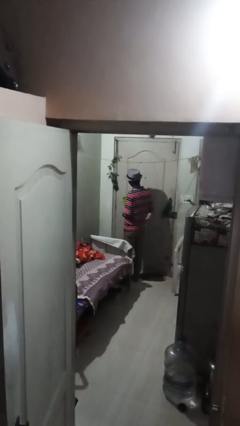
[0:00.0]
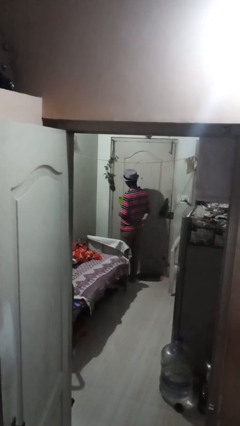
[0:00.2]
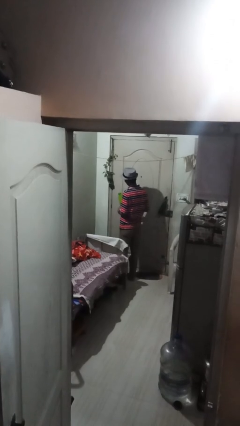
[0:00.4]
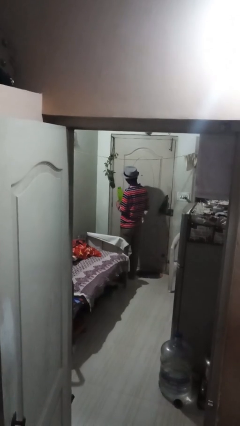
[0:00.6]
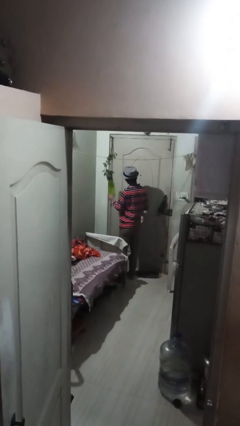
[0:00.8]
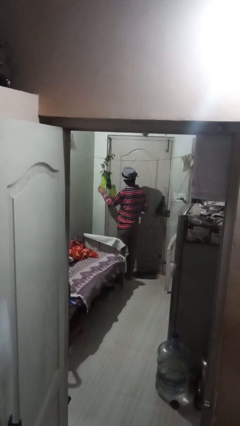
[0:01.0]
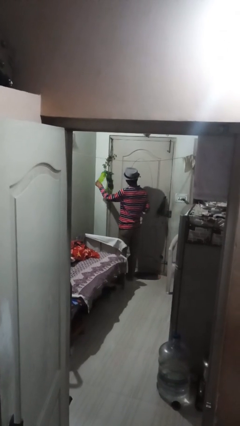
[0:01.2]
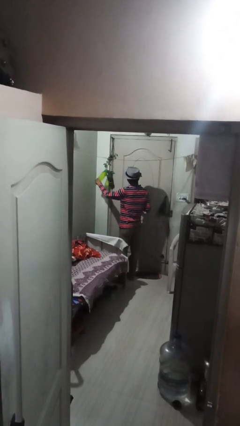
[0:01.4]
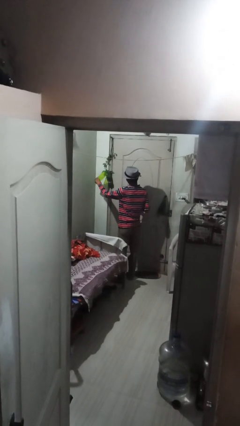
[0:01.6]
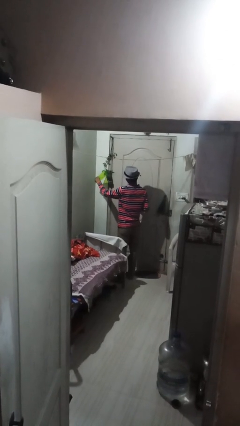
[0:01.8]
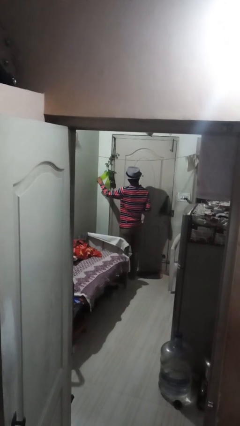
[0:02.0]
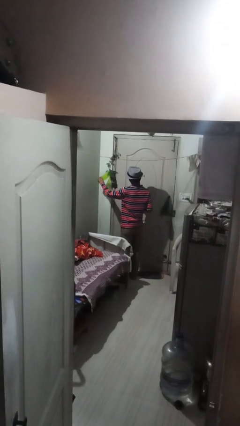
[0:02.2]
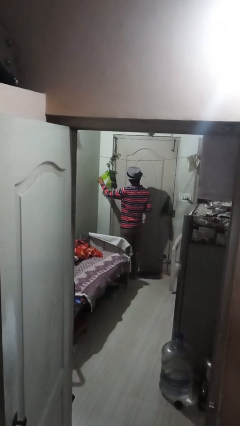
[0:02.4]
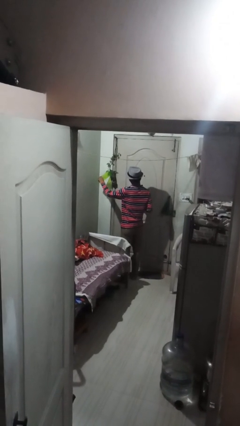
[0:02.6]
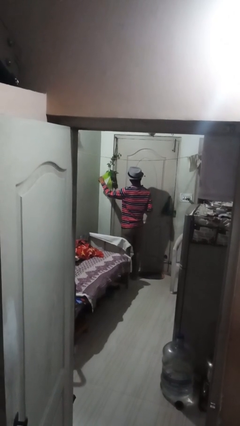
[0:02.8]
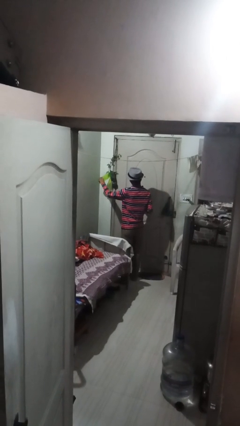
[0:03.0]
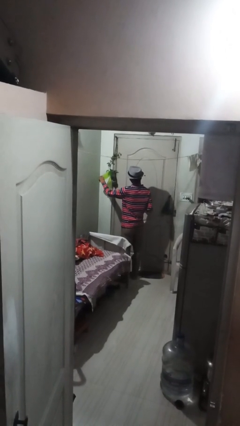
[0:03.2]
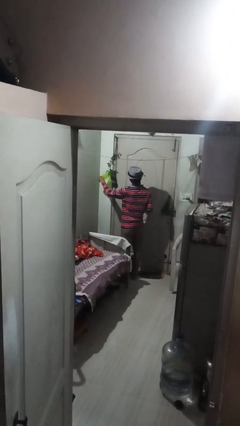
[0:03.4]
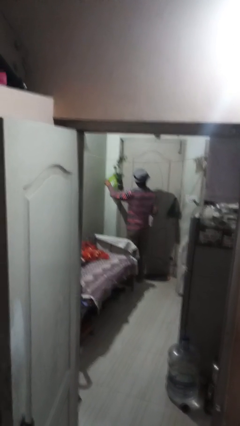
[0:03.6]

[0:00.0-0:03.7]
person waters houseplant

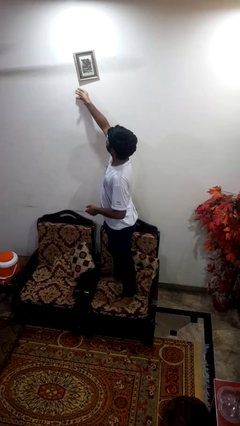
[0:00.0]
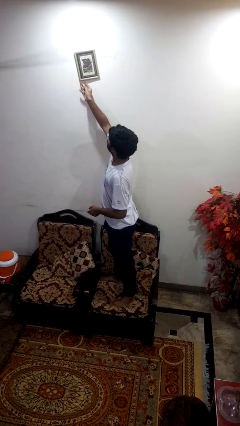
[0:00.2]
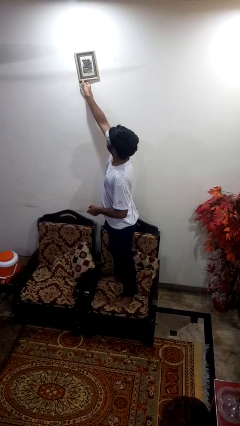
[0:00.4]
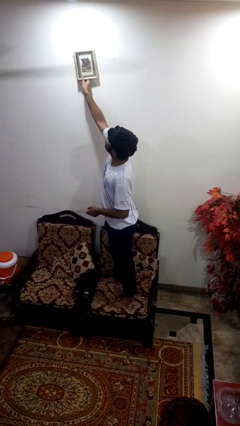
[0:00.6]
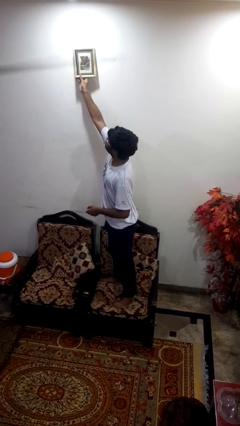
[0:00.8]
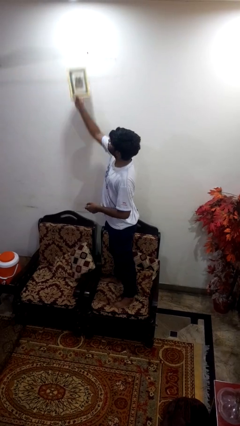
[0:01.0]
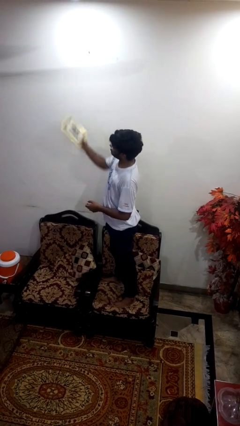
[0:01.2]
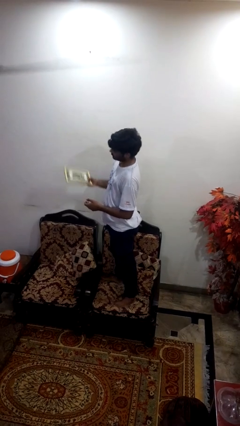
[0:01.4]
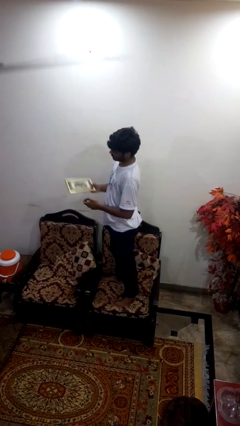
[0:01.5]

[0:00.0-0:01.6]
person takes down picture frame

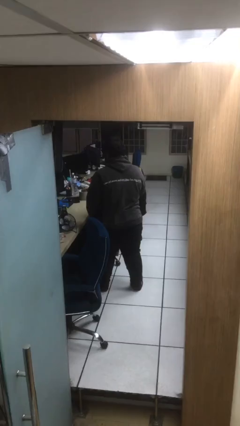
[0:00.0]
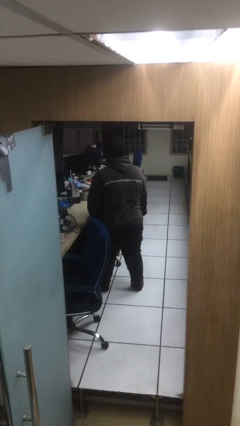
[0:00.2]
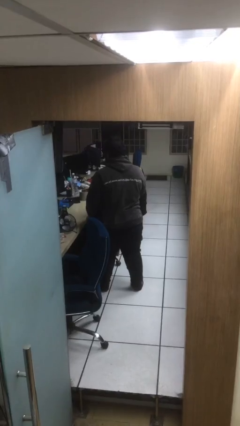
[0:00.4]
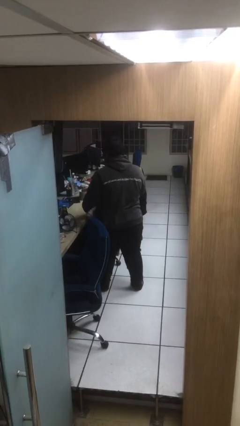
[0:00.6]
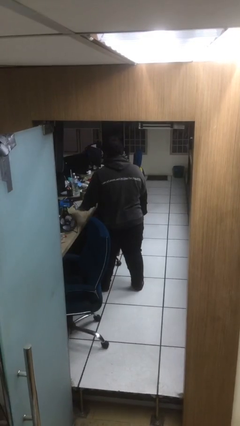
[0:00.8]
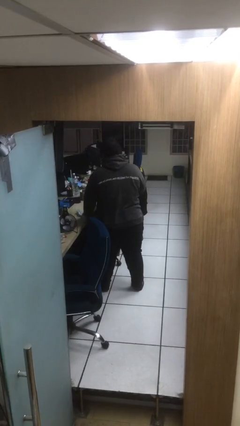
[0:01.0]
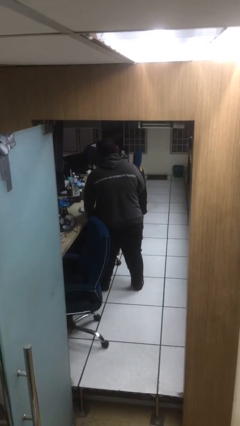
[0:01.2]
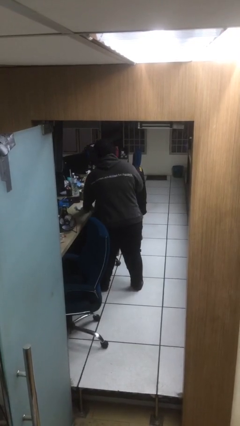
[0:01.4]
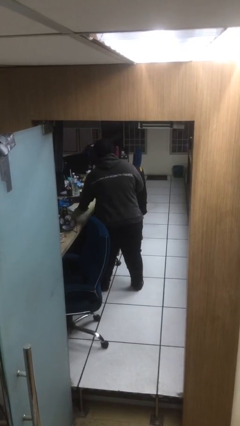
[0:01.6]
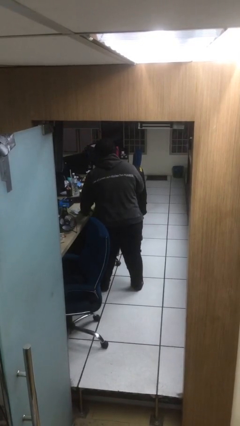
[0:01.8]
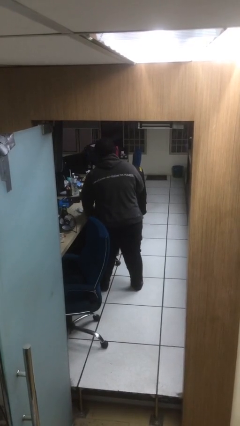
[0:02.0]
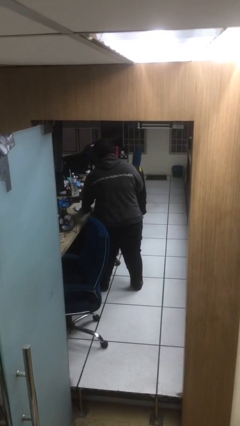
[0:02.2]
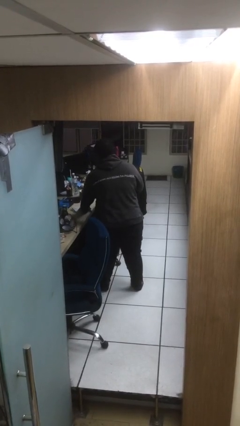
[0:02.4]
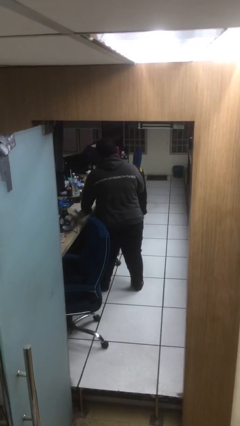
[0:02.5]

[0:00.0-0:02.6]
person cleans table with rag

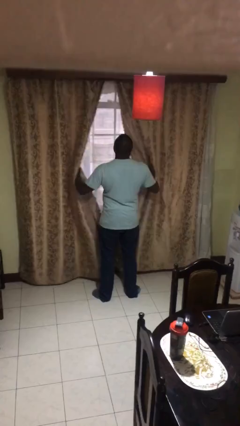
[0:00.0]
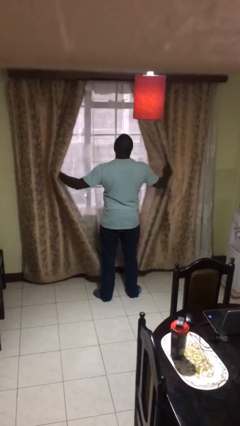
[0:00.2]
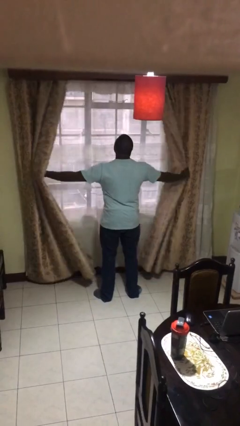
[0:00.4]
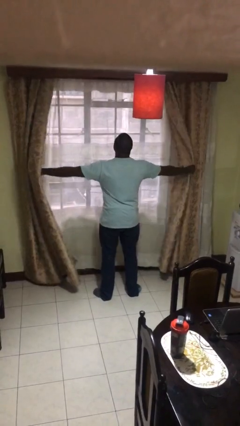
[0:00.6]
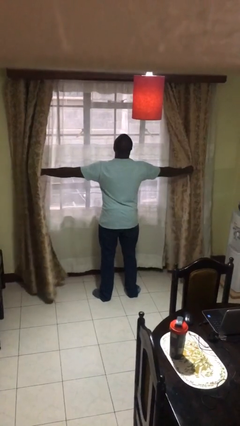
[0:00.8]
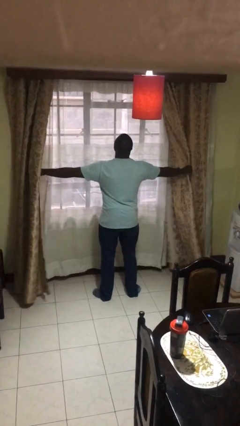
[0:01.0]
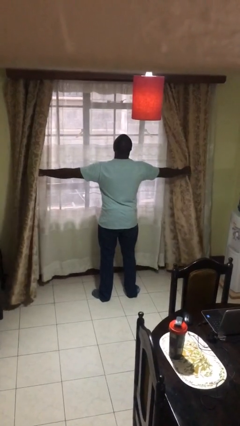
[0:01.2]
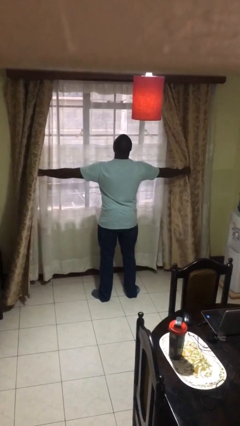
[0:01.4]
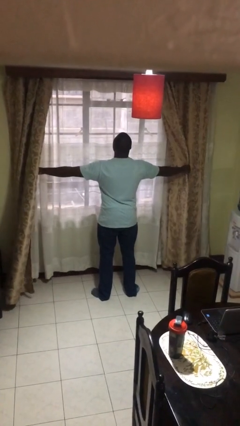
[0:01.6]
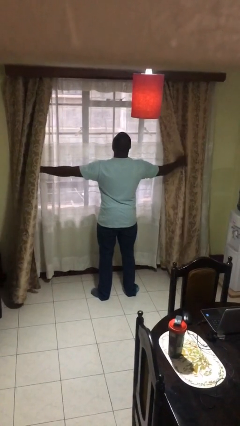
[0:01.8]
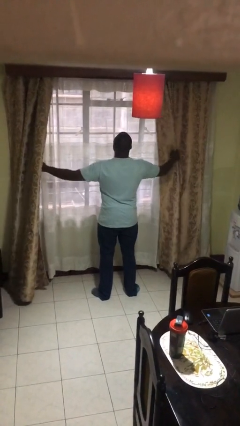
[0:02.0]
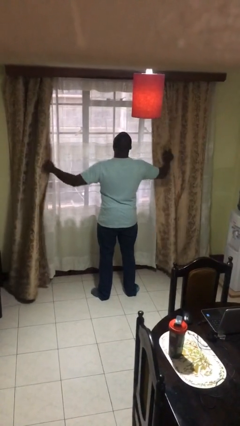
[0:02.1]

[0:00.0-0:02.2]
person opens curtains

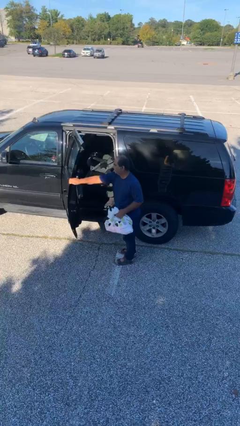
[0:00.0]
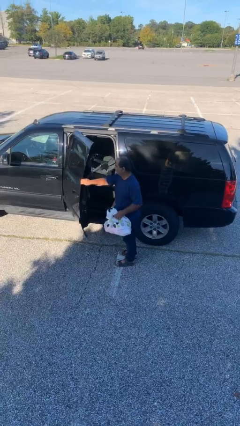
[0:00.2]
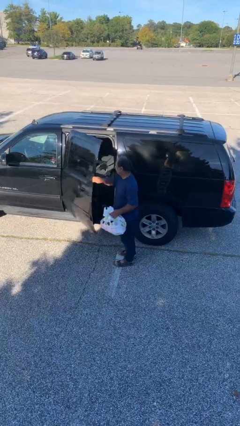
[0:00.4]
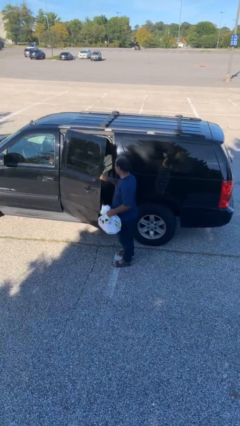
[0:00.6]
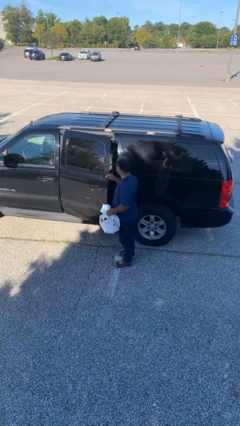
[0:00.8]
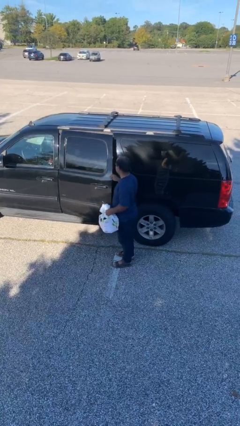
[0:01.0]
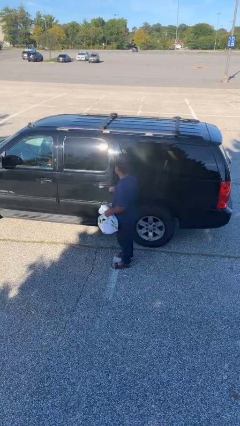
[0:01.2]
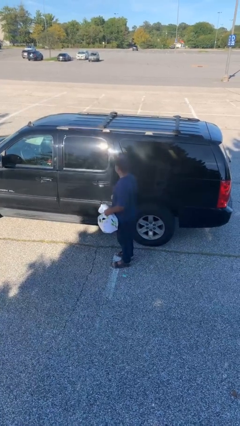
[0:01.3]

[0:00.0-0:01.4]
person closes car door

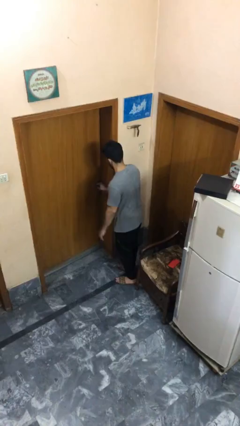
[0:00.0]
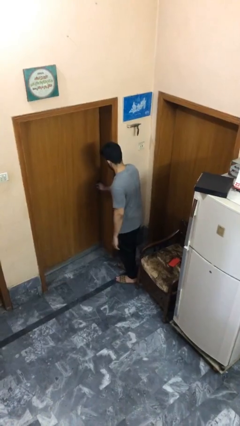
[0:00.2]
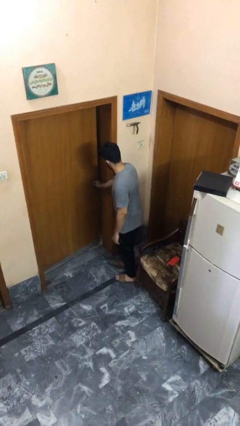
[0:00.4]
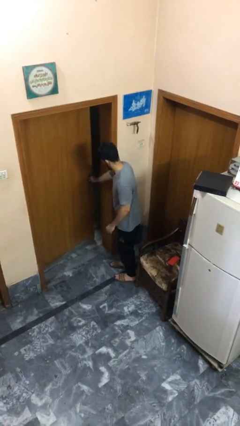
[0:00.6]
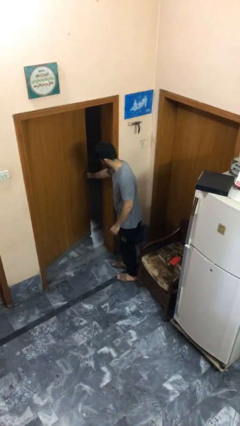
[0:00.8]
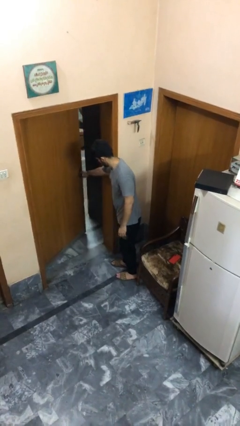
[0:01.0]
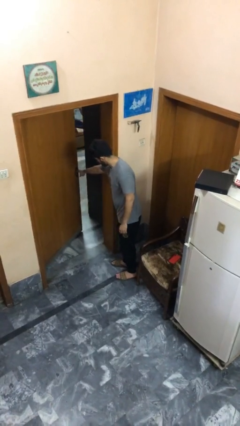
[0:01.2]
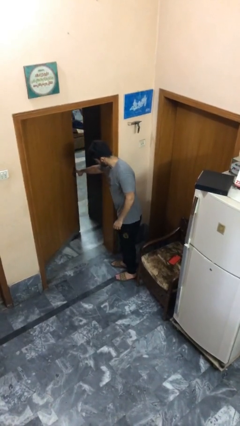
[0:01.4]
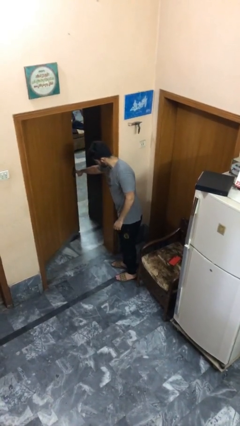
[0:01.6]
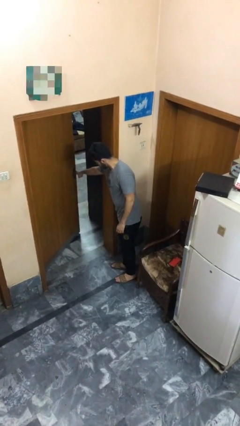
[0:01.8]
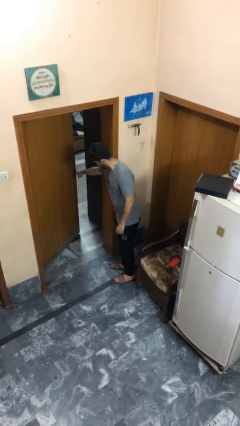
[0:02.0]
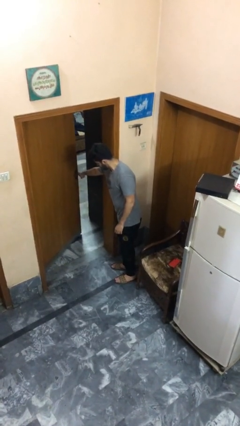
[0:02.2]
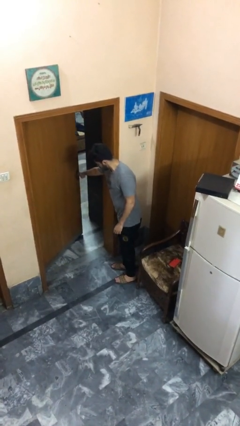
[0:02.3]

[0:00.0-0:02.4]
person opens facility door

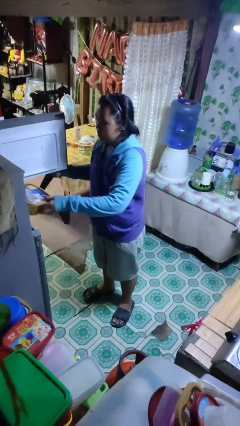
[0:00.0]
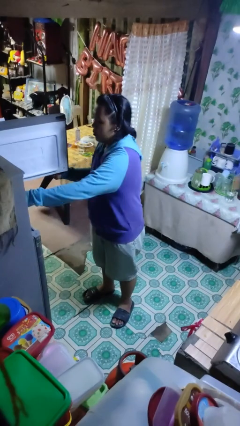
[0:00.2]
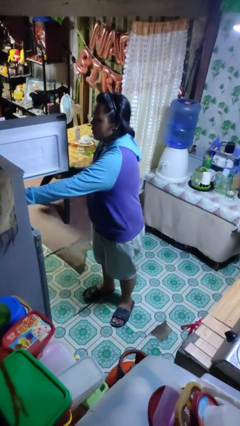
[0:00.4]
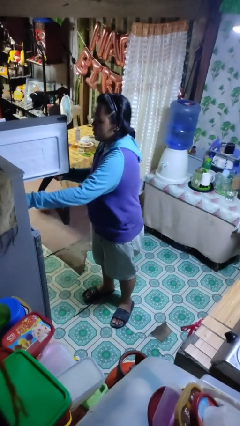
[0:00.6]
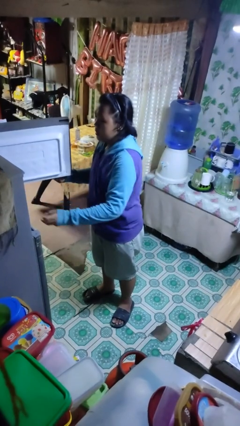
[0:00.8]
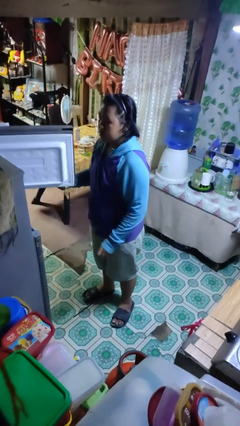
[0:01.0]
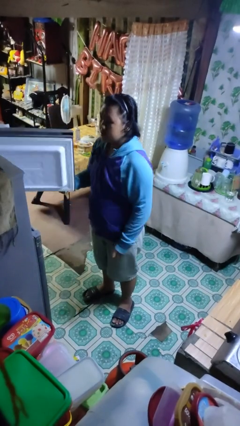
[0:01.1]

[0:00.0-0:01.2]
person puts object into refrigerator

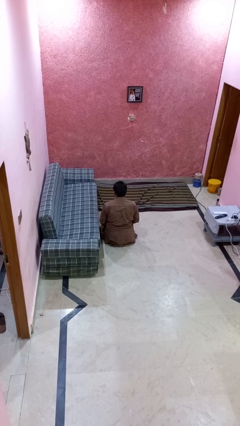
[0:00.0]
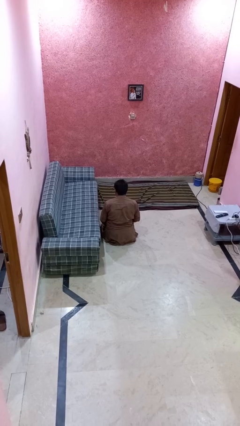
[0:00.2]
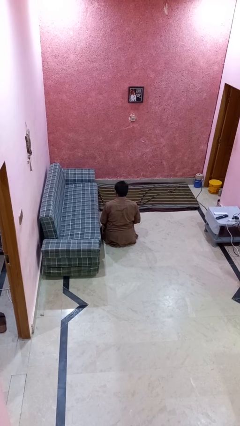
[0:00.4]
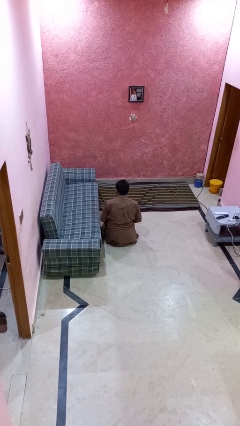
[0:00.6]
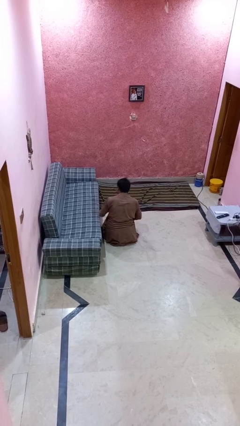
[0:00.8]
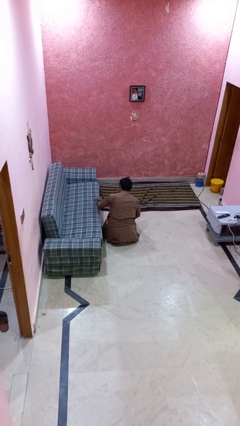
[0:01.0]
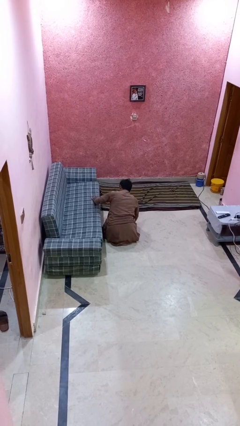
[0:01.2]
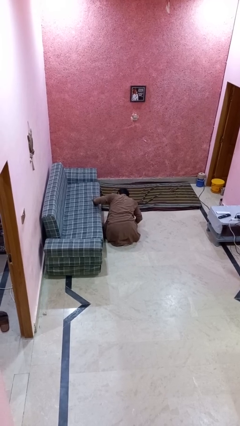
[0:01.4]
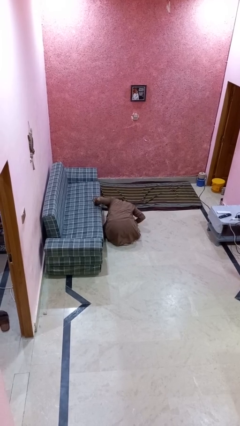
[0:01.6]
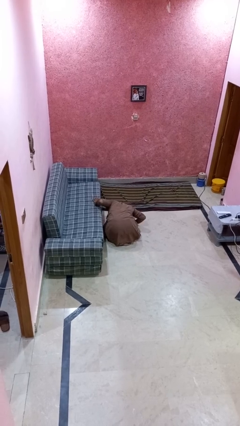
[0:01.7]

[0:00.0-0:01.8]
person searches under couch
